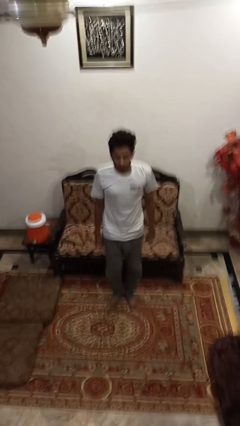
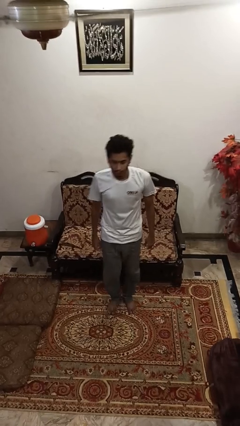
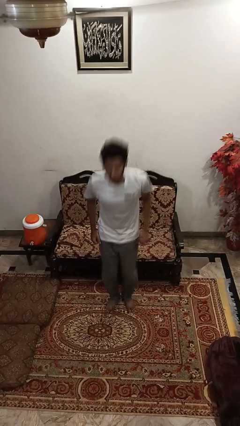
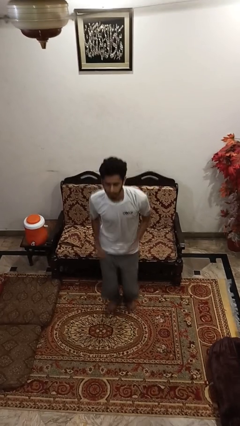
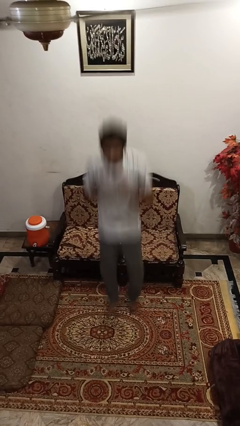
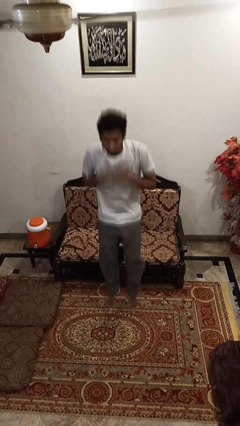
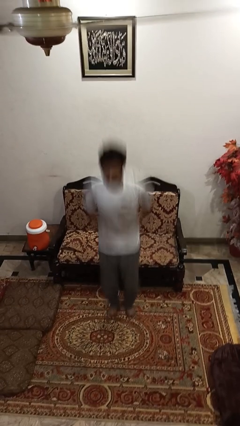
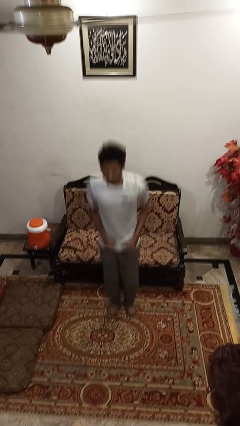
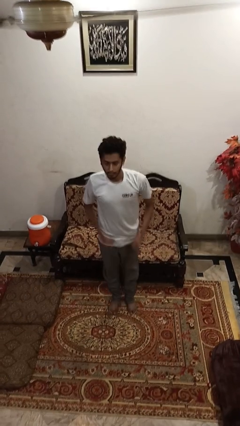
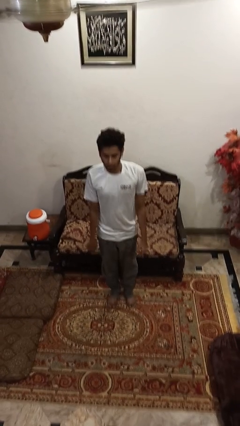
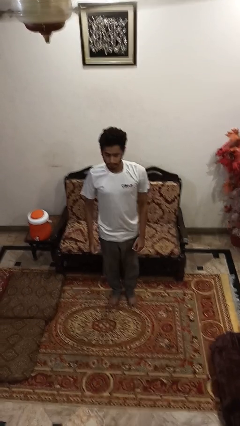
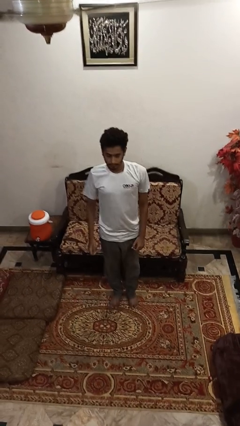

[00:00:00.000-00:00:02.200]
person jumps

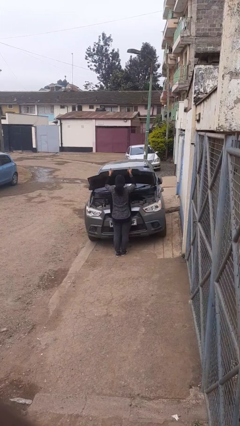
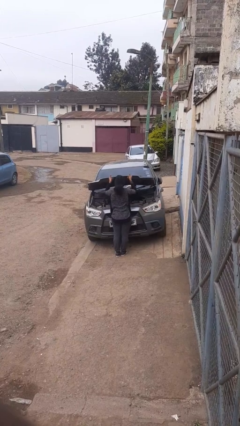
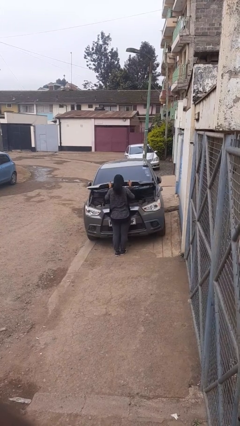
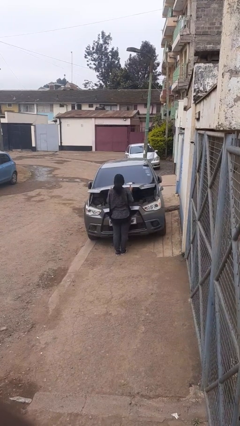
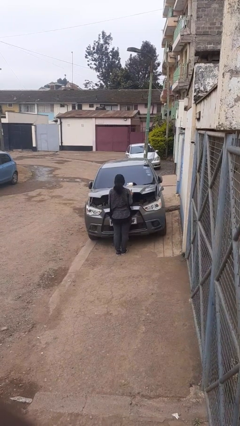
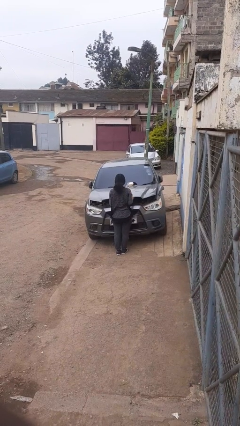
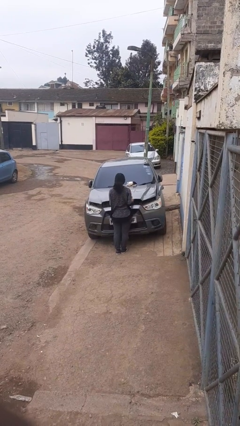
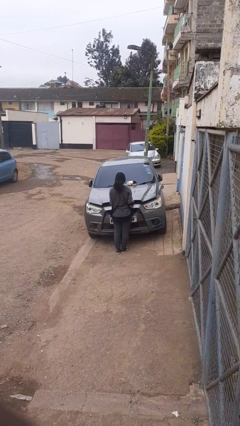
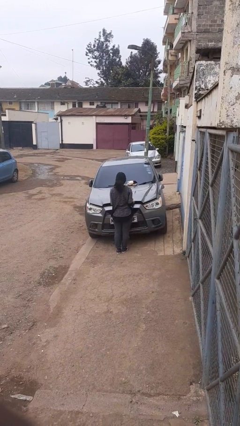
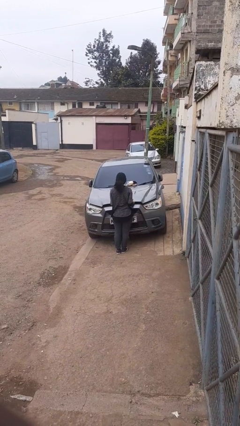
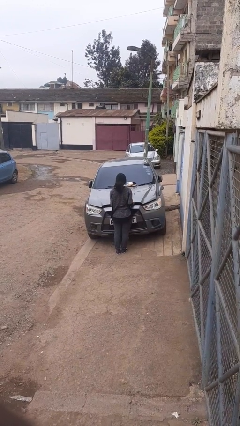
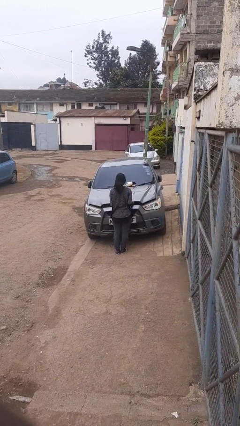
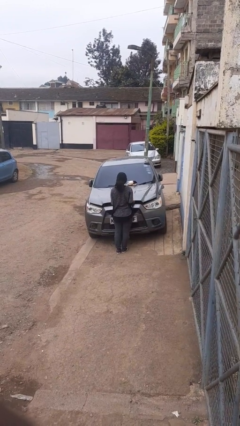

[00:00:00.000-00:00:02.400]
person closes car hood

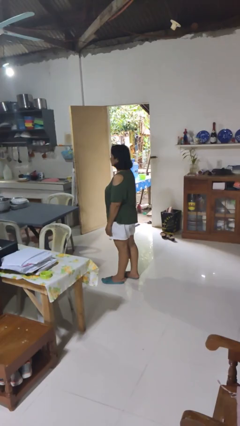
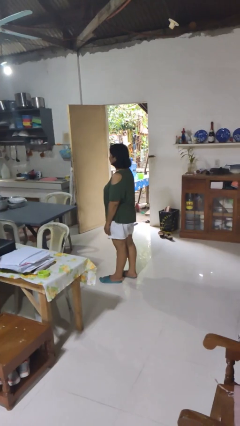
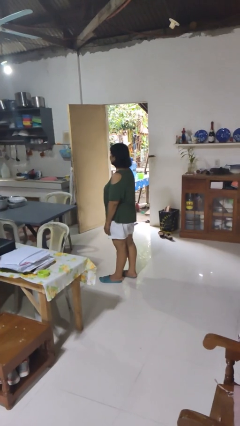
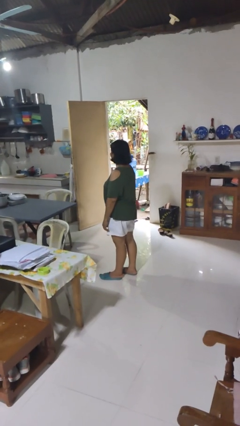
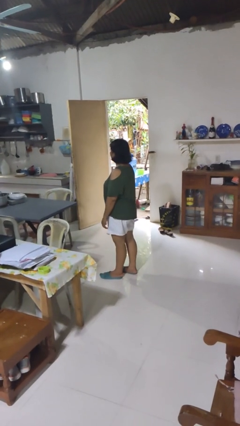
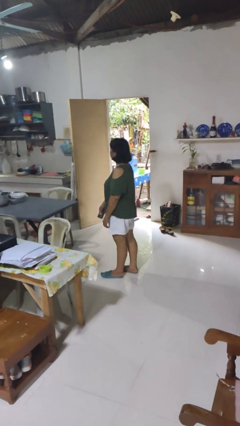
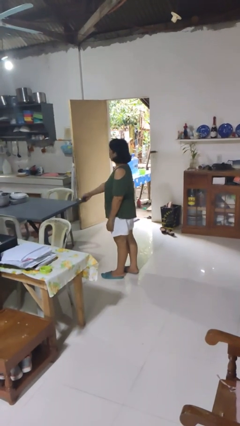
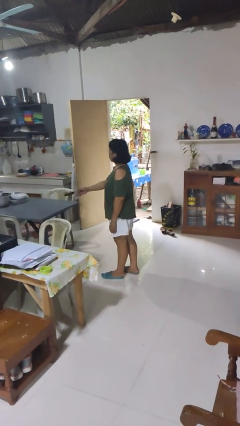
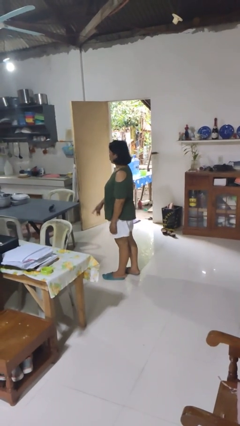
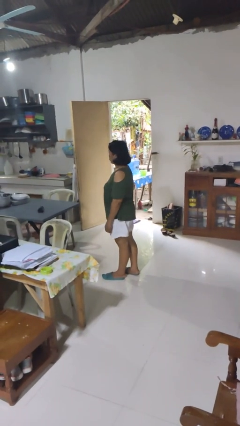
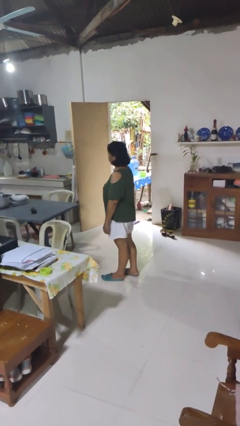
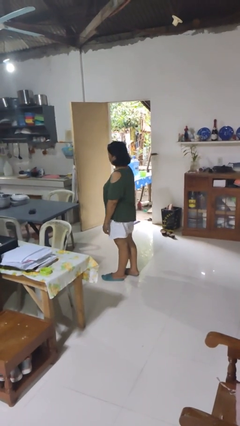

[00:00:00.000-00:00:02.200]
person throws object on table

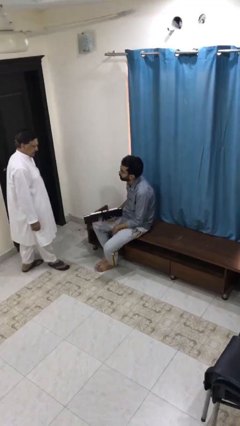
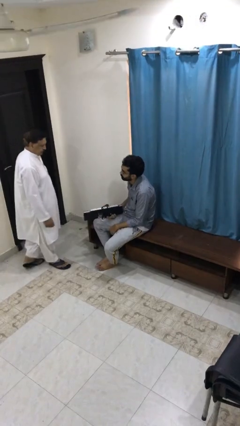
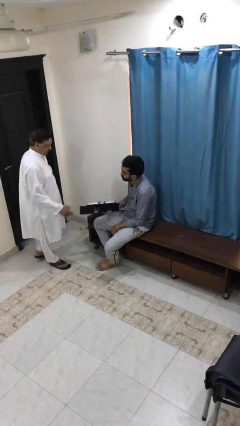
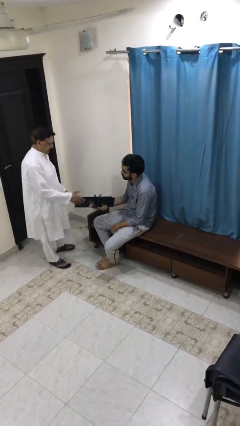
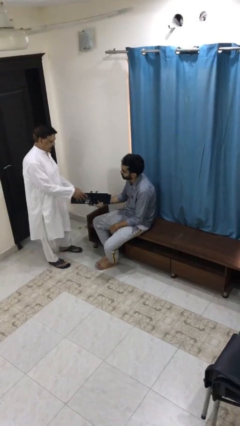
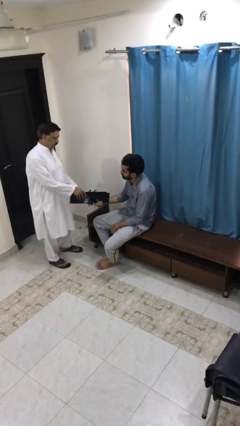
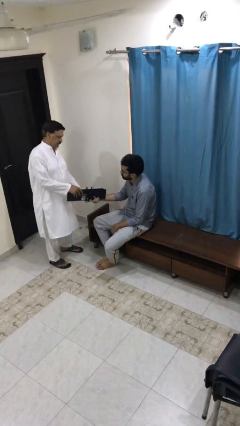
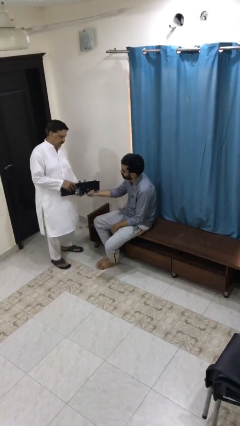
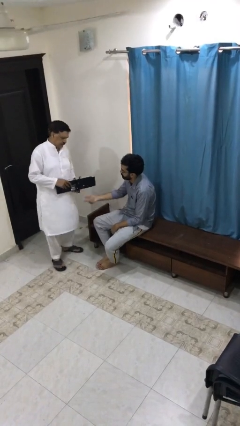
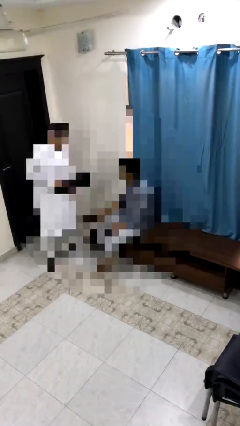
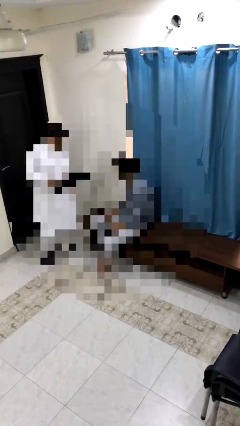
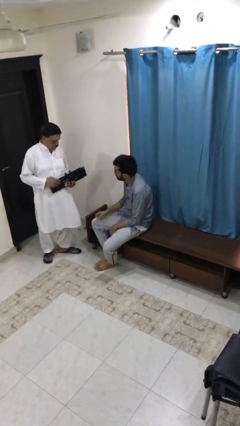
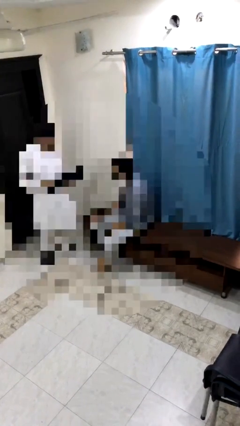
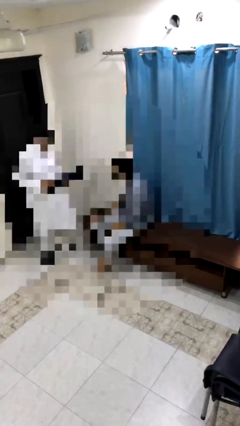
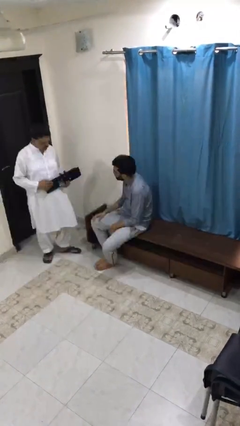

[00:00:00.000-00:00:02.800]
person transfers object to person

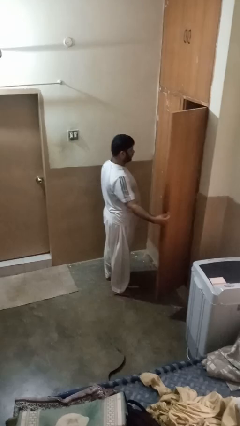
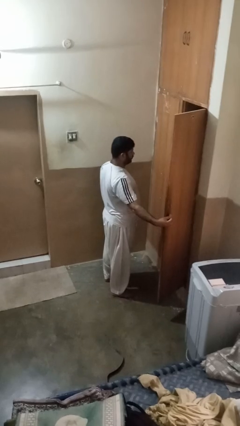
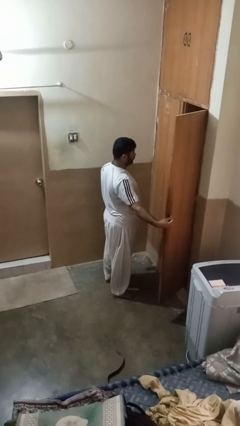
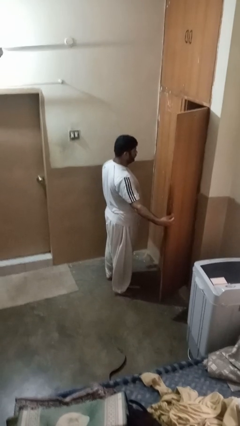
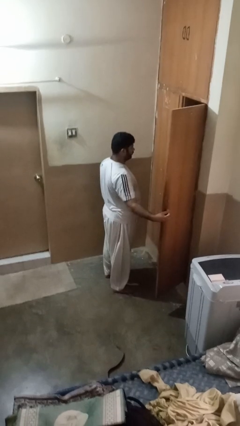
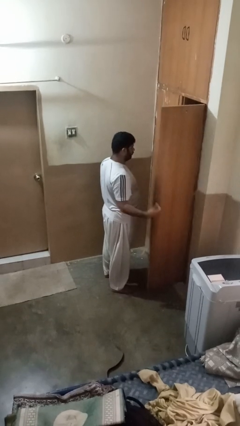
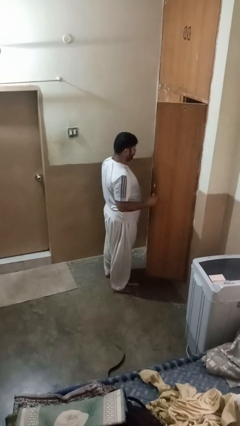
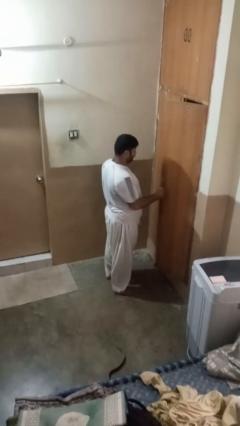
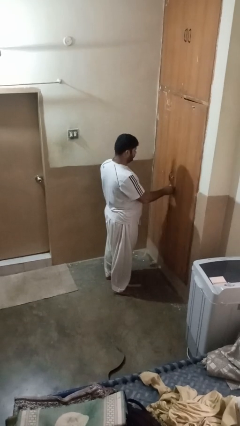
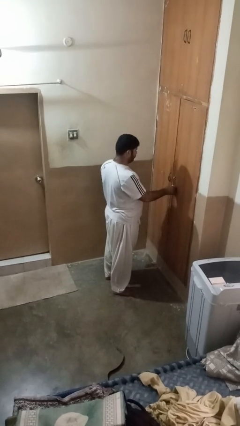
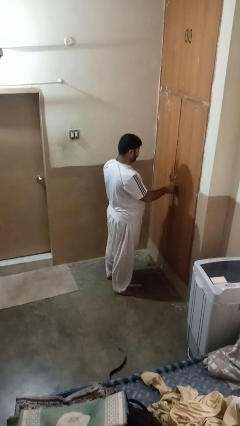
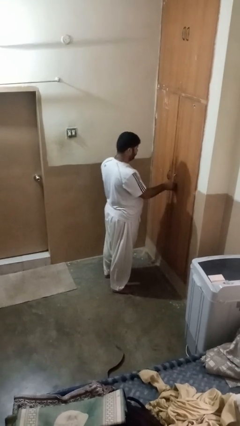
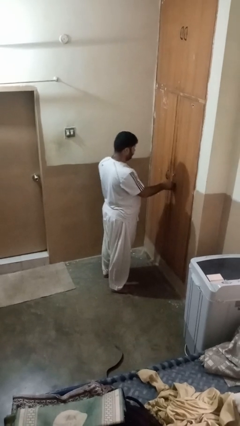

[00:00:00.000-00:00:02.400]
person closes closet door

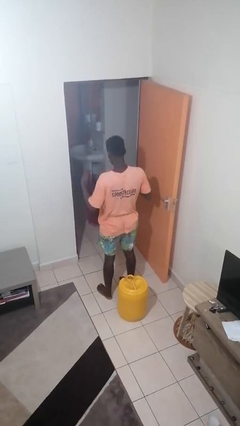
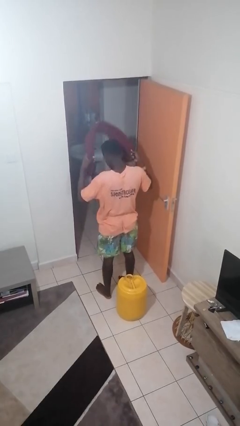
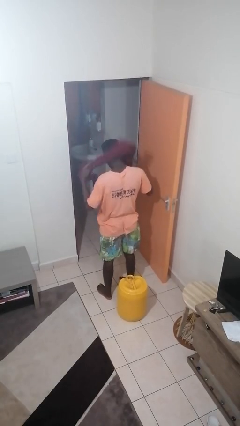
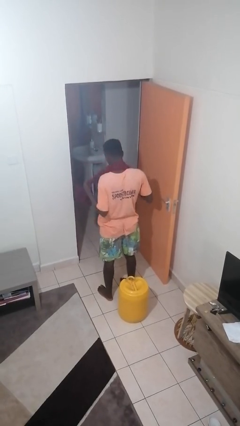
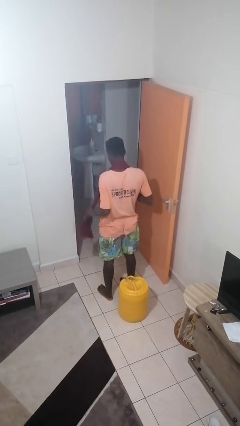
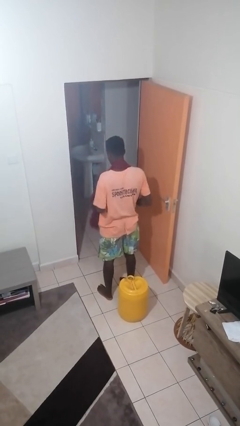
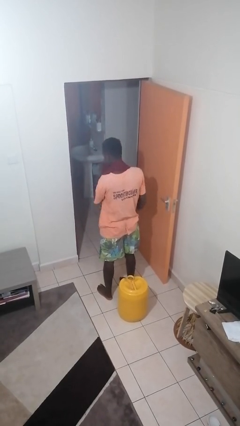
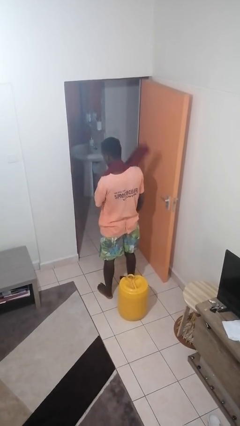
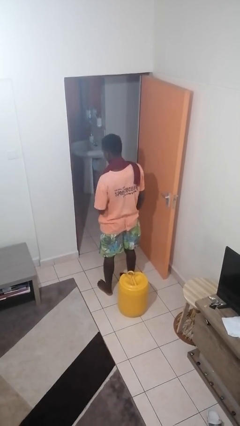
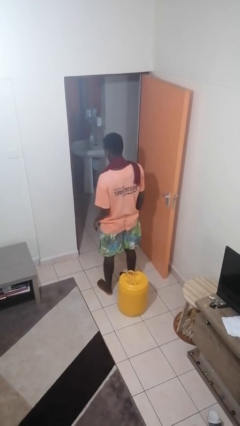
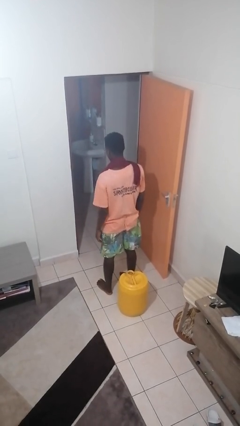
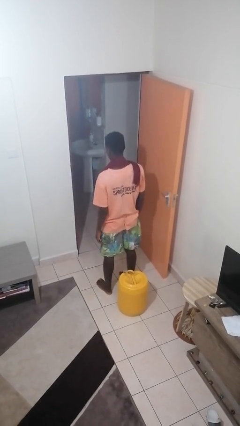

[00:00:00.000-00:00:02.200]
person puts on scarf

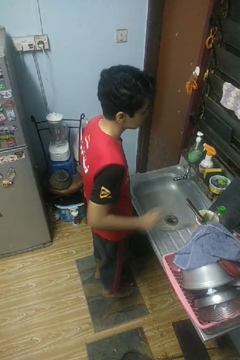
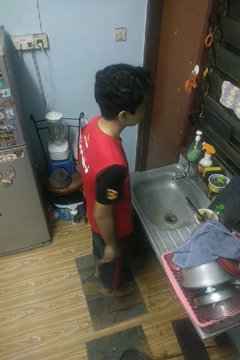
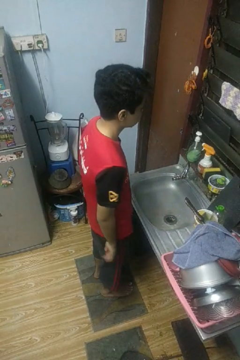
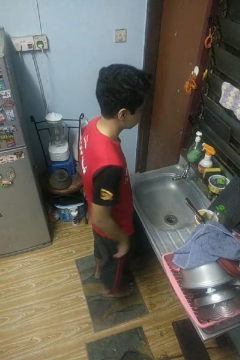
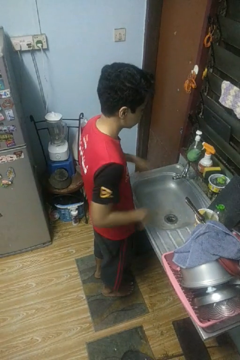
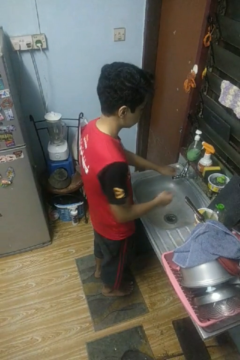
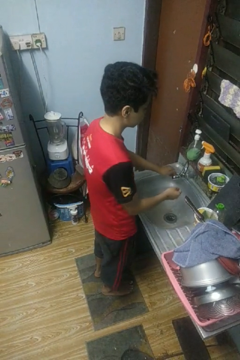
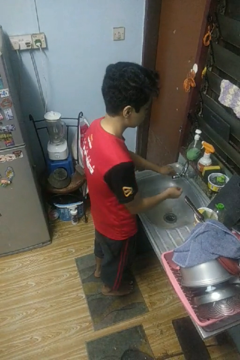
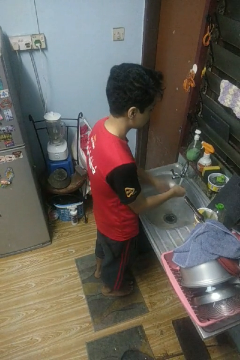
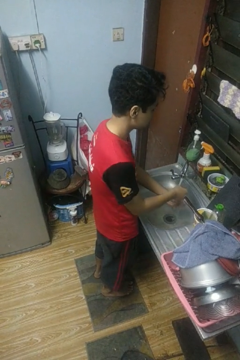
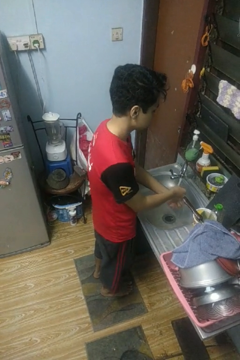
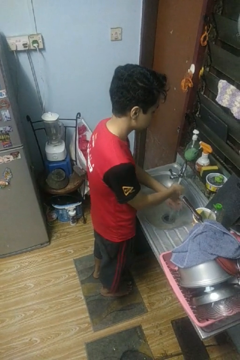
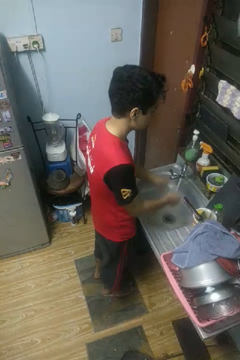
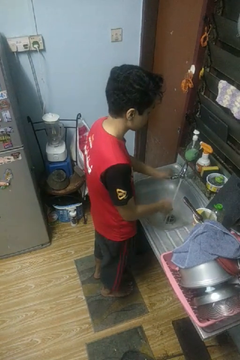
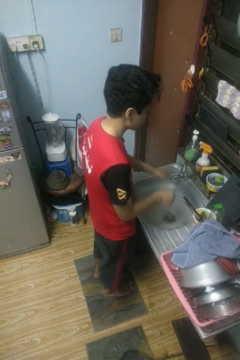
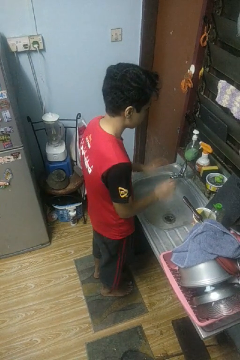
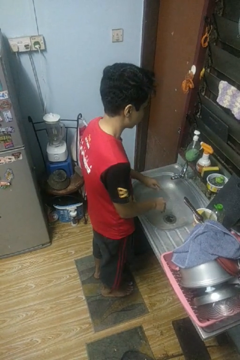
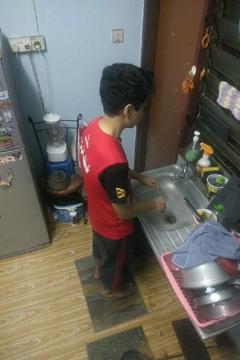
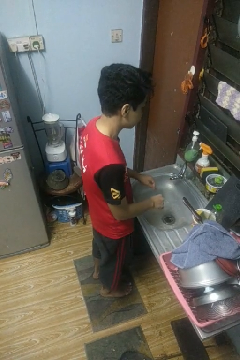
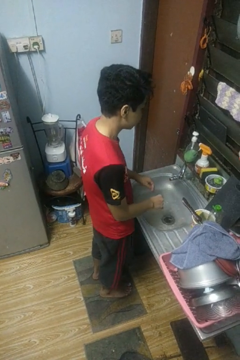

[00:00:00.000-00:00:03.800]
person washes hands
